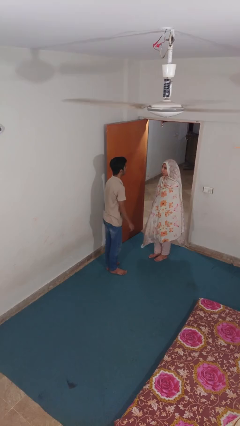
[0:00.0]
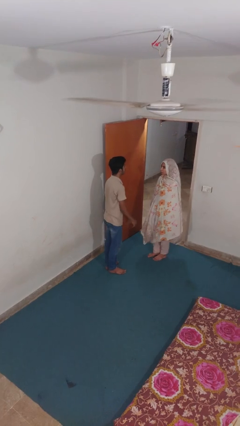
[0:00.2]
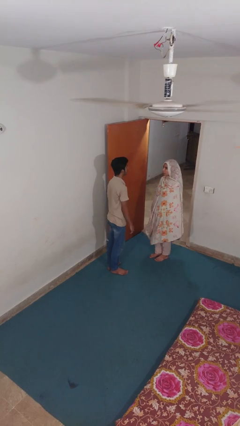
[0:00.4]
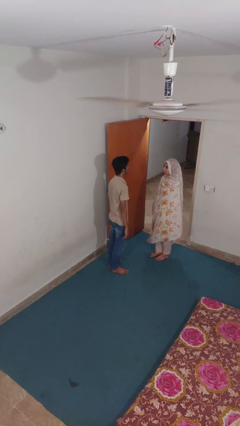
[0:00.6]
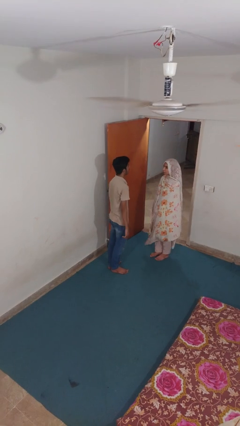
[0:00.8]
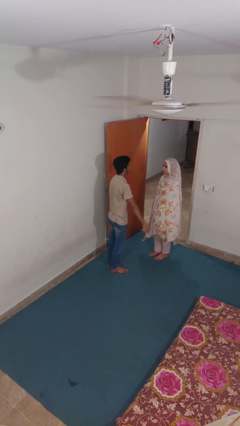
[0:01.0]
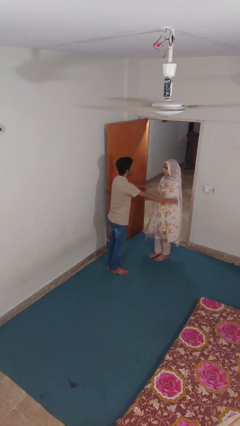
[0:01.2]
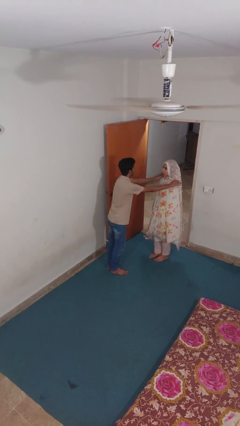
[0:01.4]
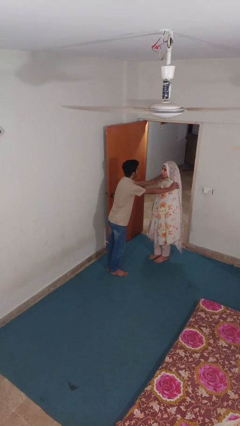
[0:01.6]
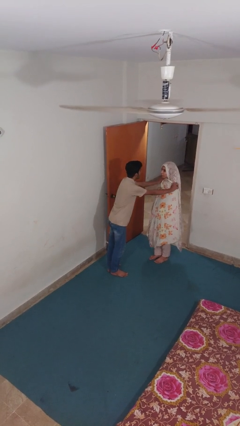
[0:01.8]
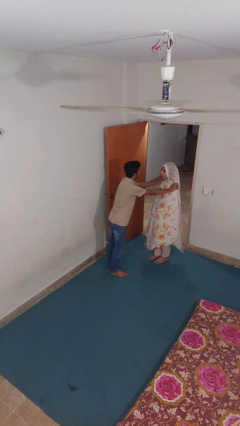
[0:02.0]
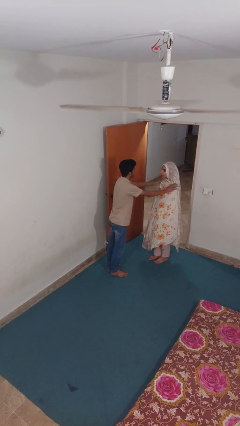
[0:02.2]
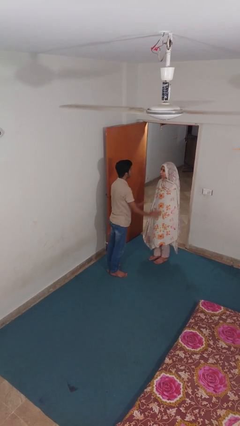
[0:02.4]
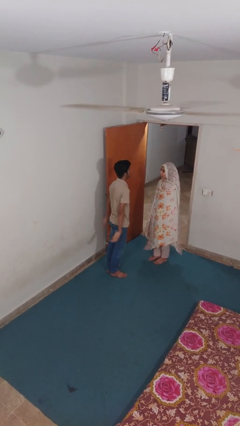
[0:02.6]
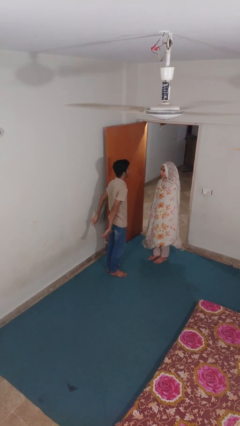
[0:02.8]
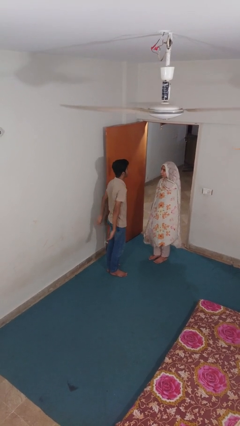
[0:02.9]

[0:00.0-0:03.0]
person pounds shoulders of person

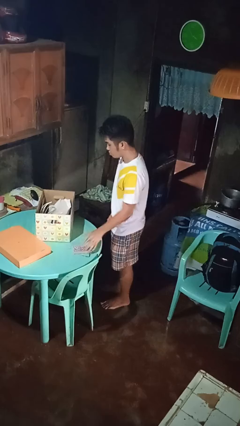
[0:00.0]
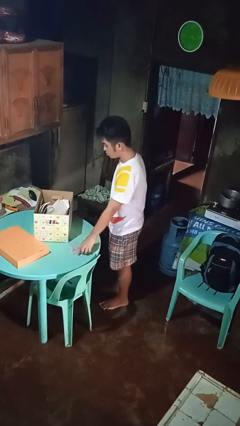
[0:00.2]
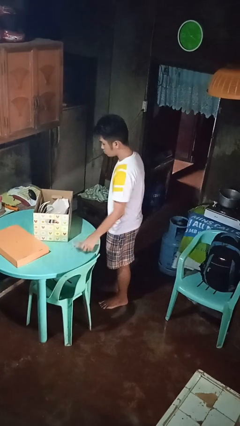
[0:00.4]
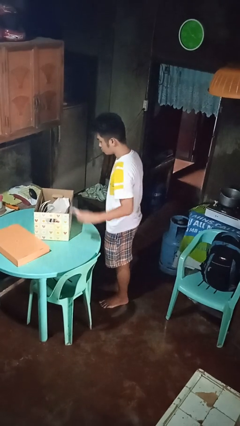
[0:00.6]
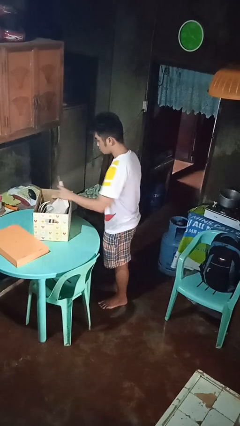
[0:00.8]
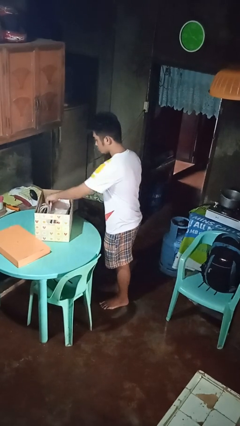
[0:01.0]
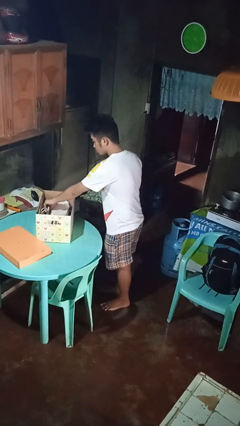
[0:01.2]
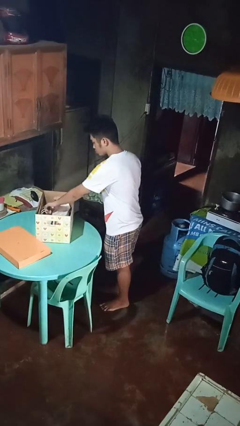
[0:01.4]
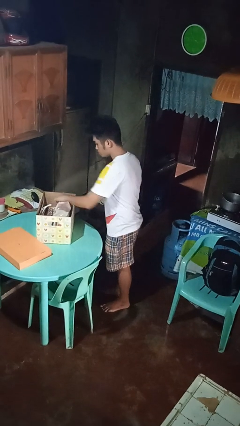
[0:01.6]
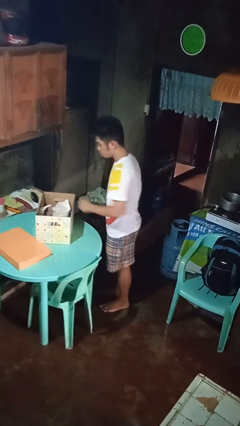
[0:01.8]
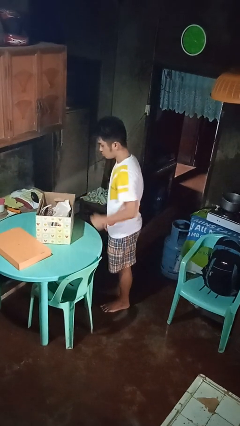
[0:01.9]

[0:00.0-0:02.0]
person puts object into box

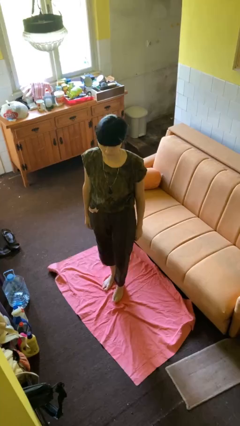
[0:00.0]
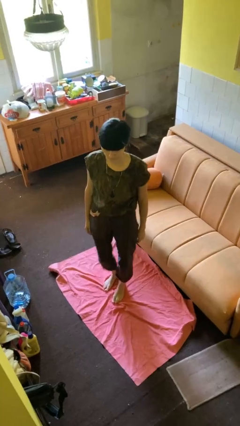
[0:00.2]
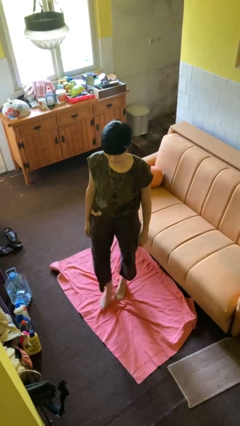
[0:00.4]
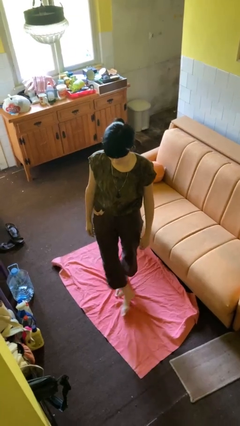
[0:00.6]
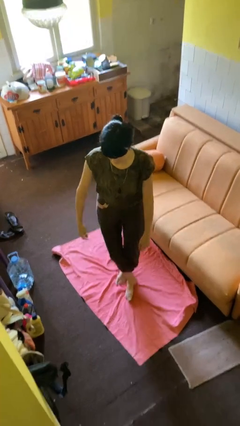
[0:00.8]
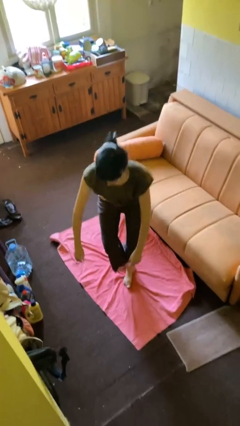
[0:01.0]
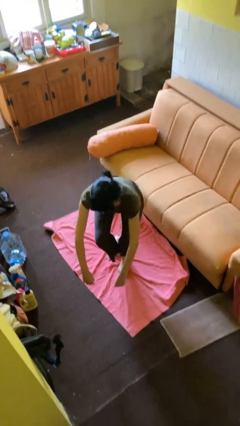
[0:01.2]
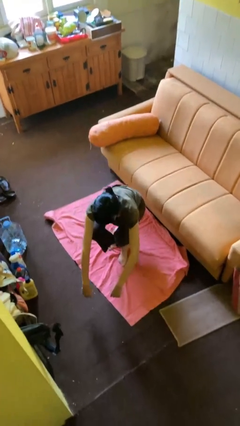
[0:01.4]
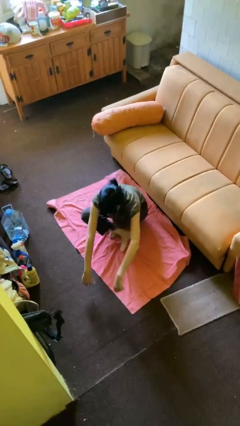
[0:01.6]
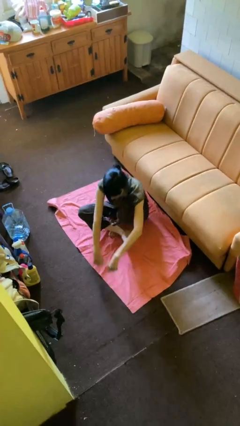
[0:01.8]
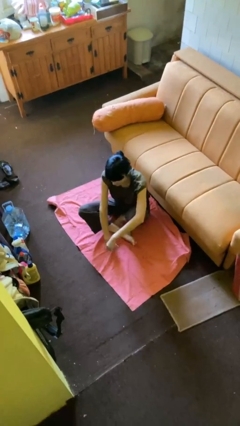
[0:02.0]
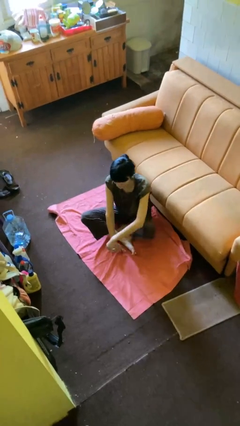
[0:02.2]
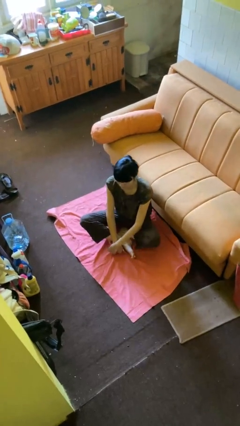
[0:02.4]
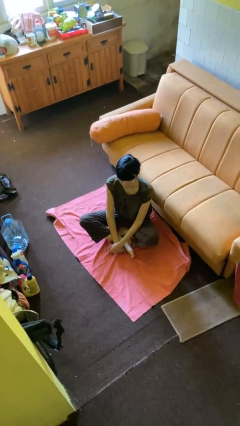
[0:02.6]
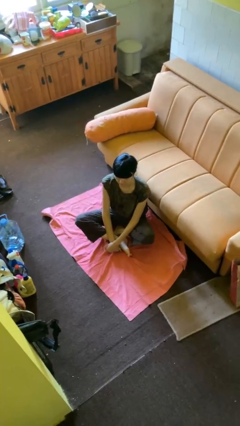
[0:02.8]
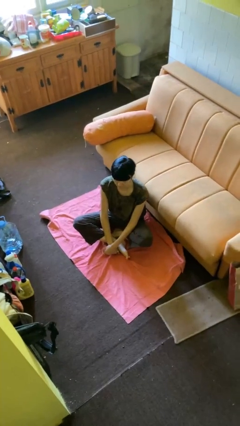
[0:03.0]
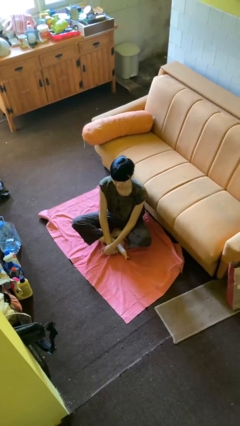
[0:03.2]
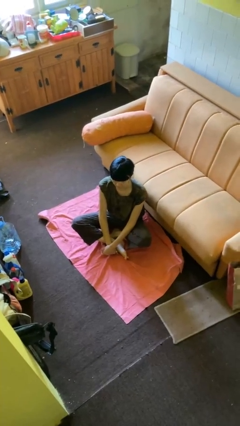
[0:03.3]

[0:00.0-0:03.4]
person sits crisscross

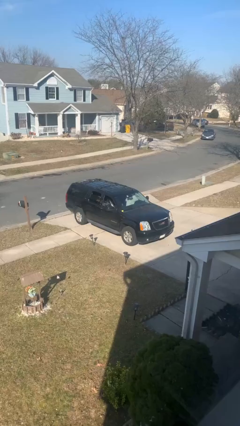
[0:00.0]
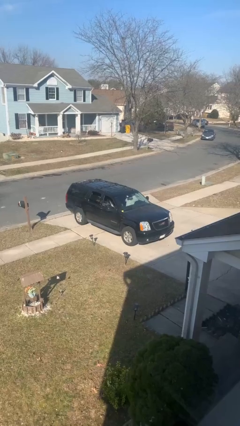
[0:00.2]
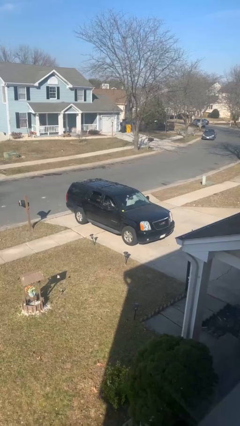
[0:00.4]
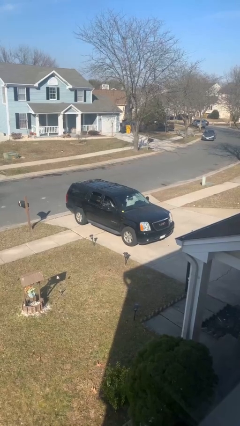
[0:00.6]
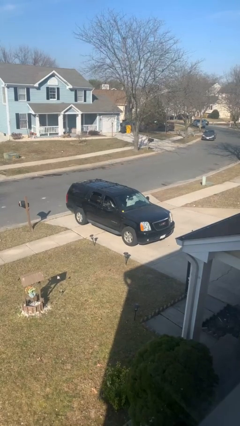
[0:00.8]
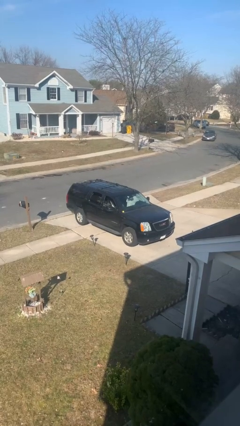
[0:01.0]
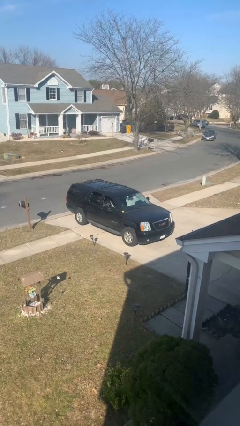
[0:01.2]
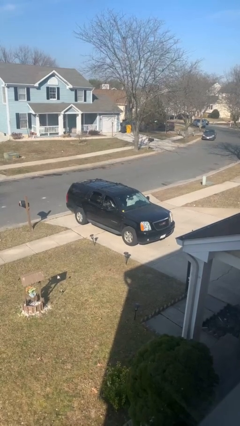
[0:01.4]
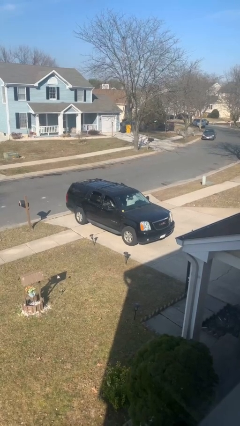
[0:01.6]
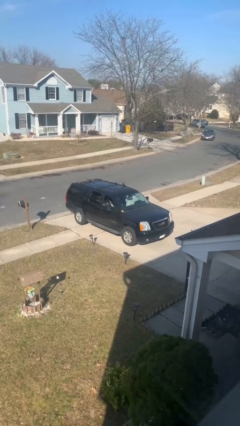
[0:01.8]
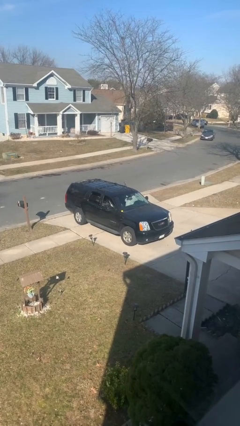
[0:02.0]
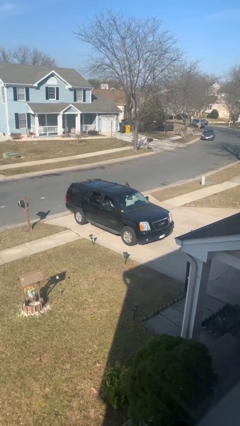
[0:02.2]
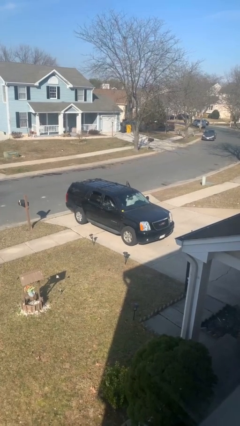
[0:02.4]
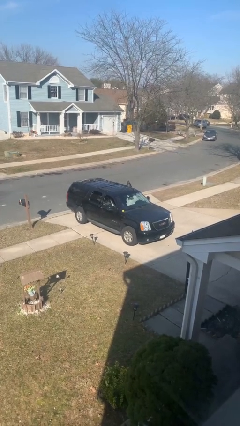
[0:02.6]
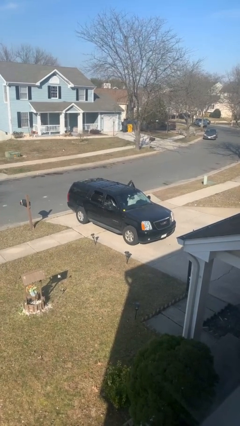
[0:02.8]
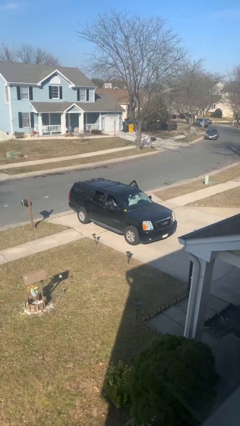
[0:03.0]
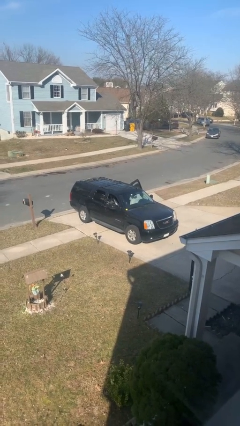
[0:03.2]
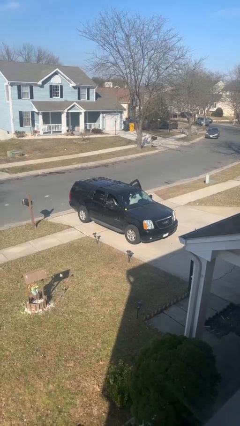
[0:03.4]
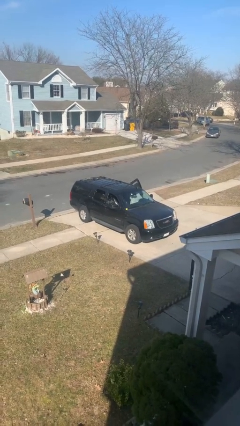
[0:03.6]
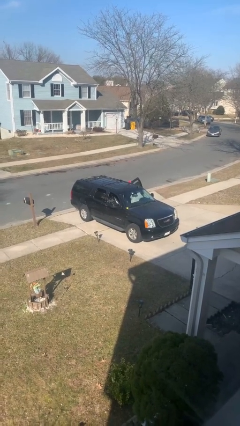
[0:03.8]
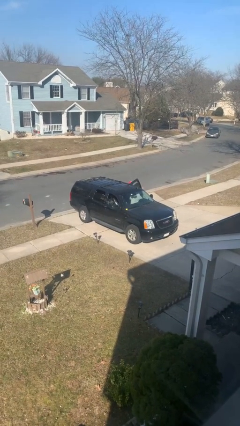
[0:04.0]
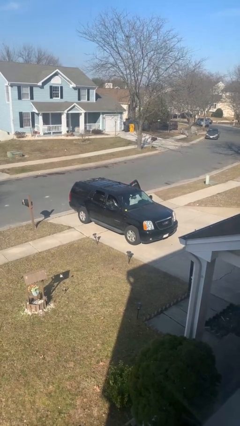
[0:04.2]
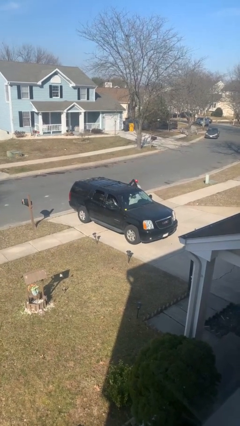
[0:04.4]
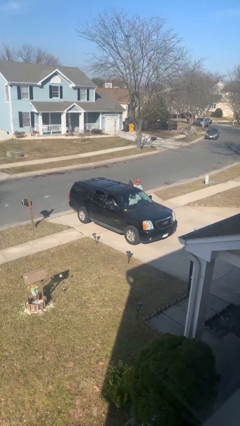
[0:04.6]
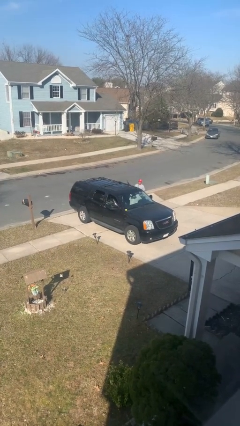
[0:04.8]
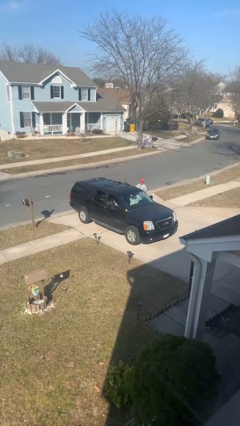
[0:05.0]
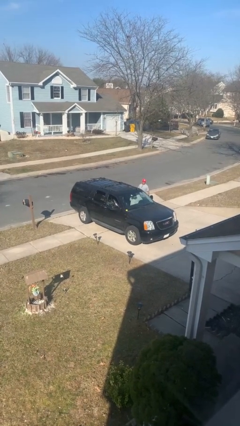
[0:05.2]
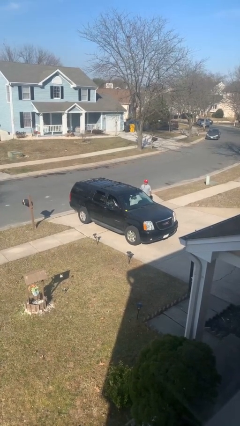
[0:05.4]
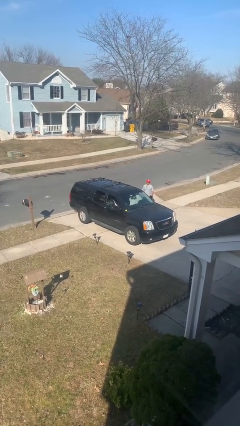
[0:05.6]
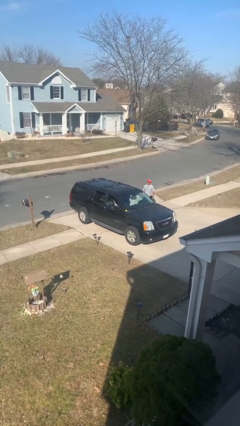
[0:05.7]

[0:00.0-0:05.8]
car drops off person

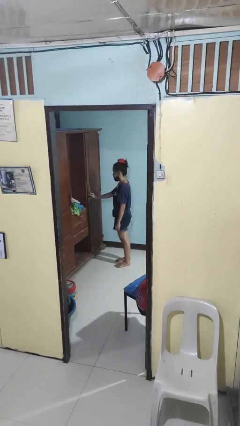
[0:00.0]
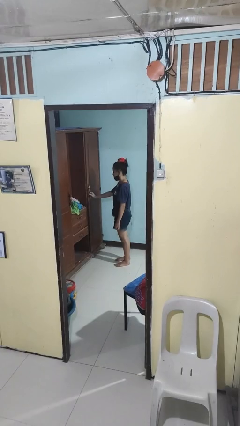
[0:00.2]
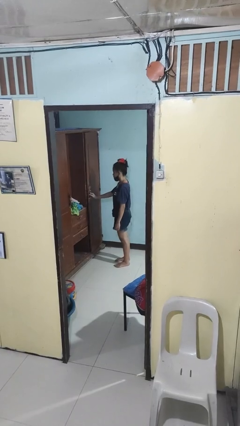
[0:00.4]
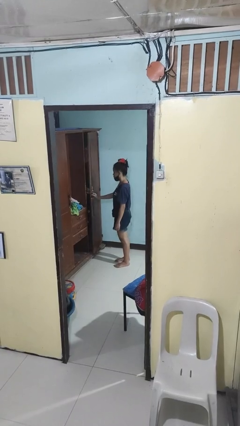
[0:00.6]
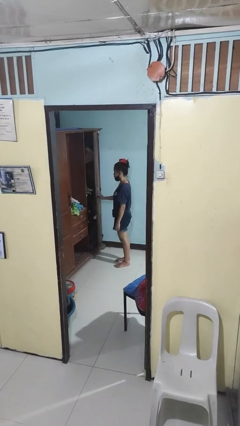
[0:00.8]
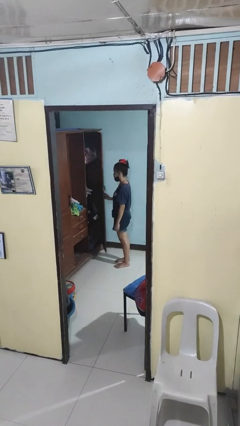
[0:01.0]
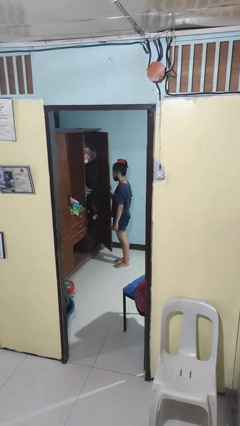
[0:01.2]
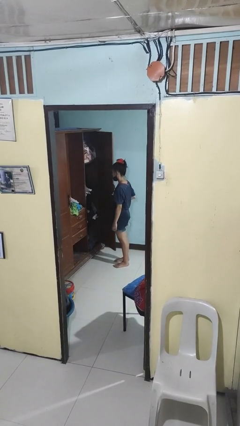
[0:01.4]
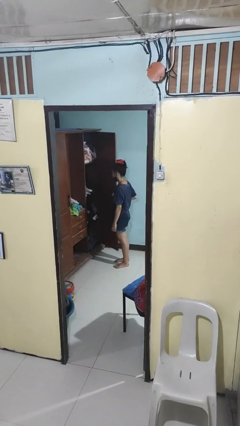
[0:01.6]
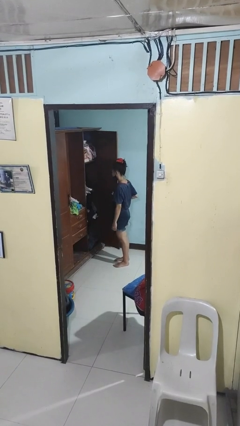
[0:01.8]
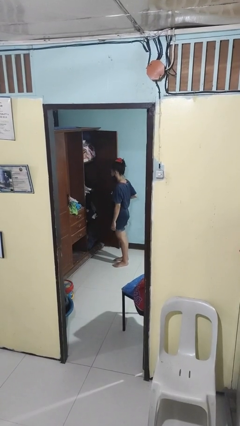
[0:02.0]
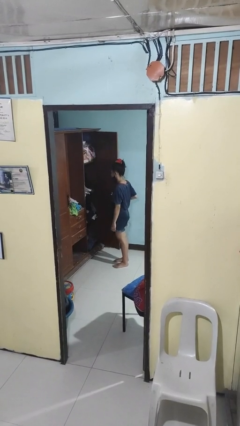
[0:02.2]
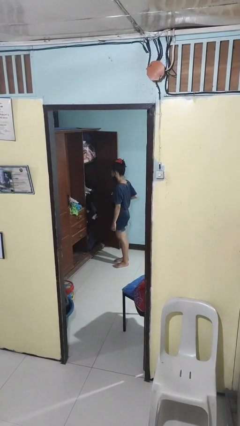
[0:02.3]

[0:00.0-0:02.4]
person opens closet door

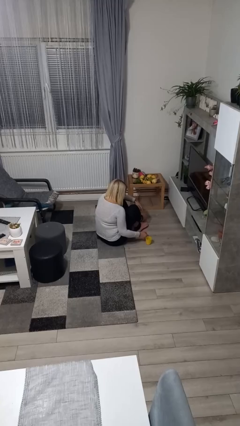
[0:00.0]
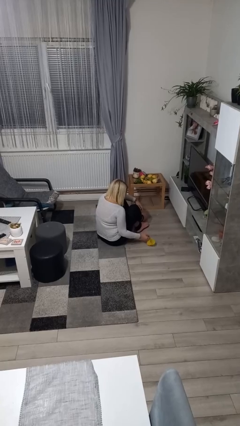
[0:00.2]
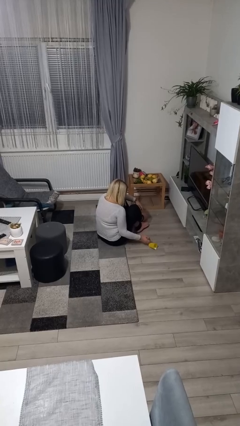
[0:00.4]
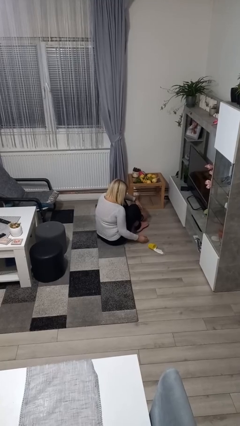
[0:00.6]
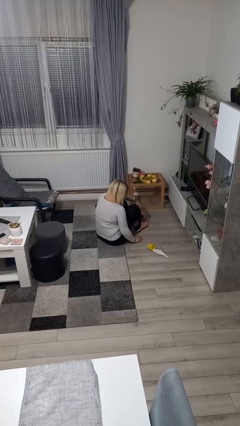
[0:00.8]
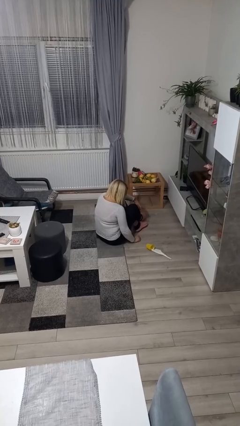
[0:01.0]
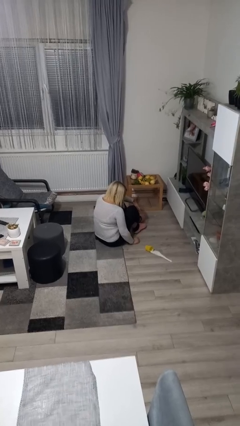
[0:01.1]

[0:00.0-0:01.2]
person spills on floor
